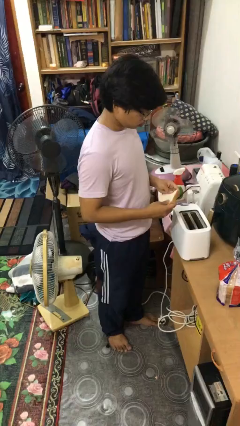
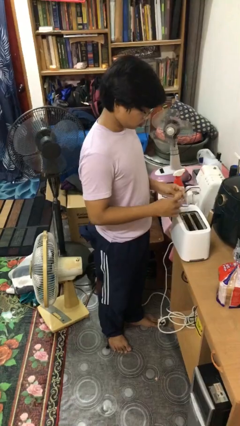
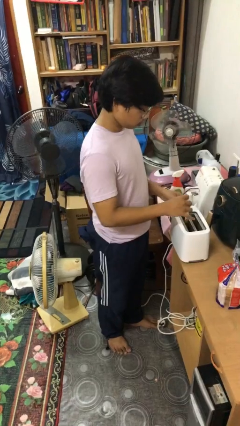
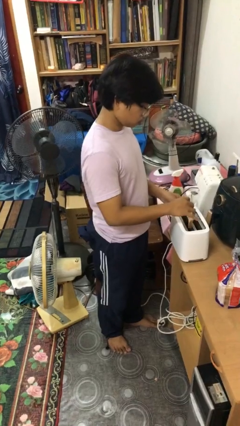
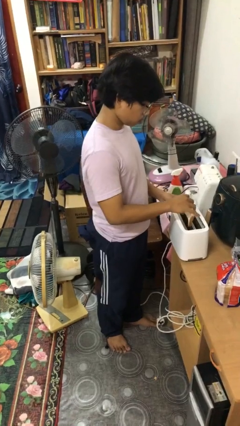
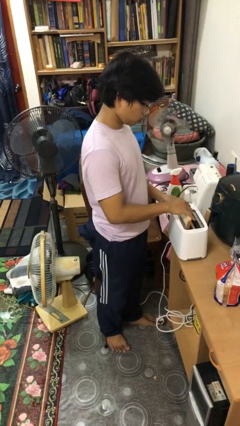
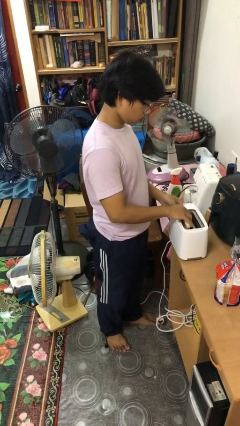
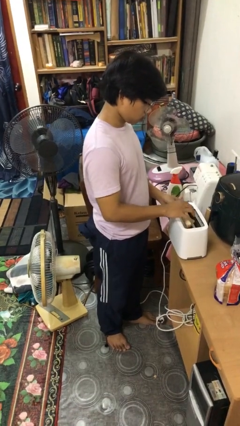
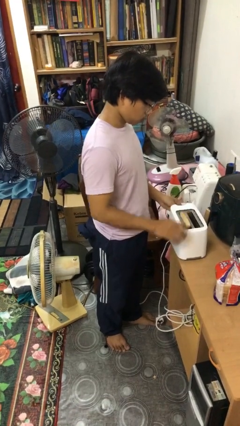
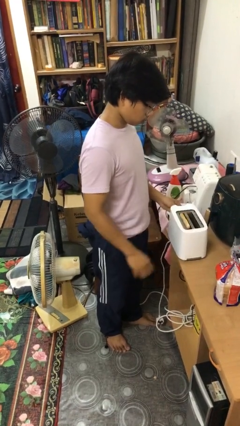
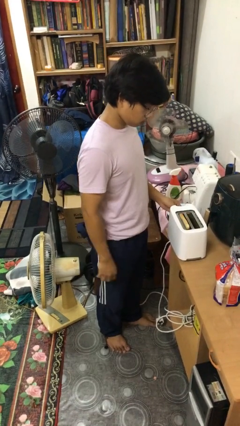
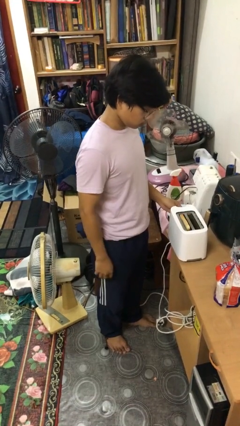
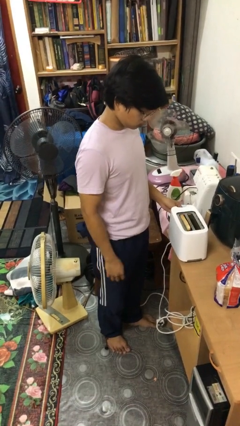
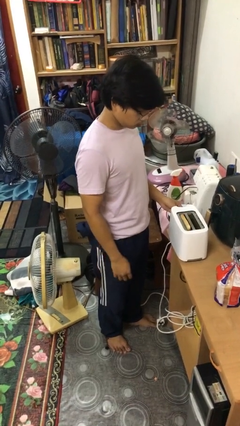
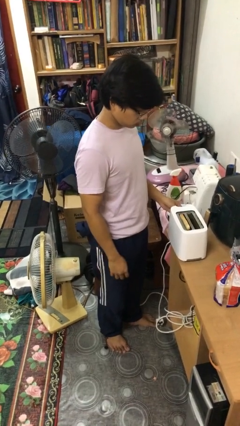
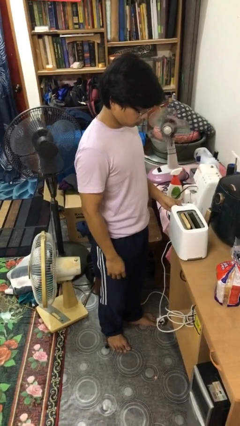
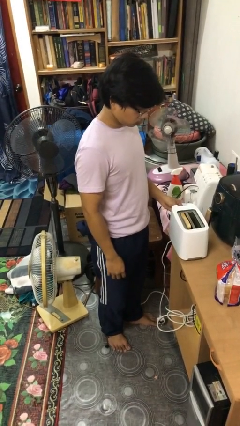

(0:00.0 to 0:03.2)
person puts object into toaster

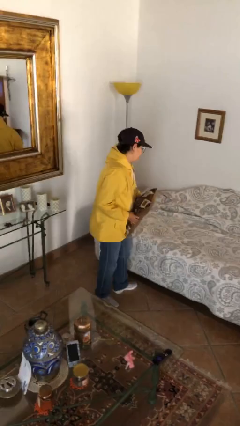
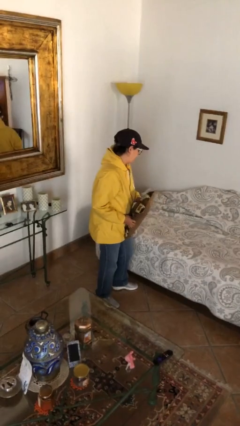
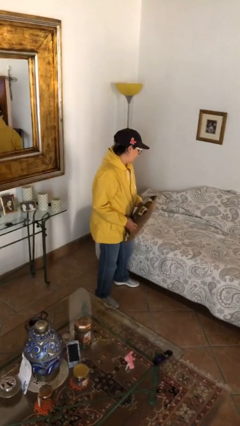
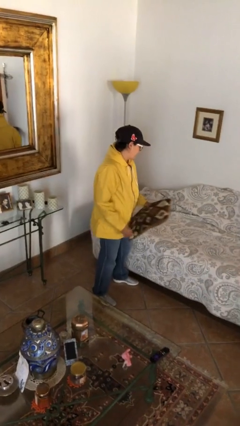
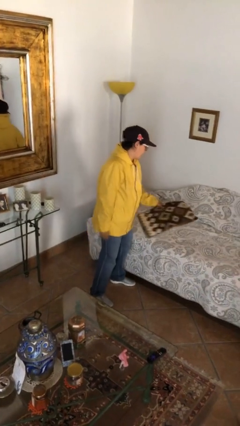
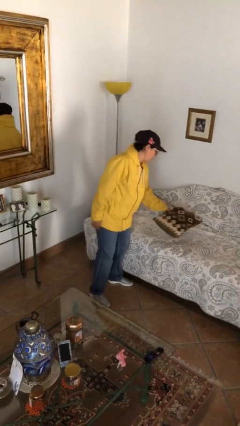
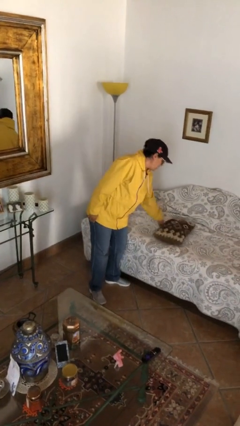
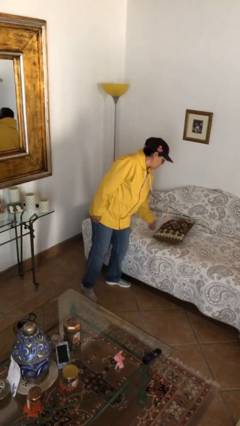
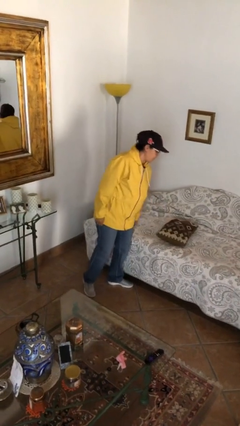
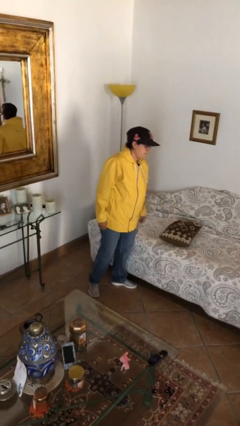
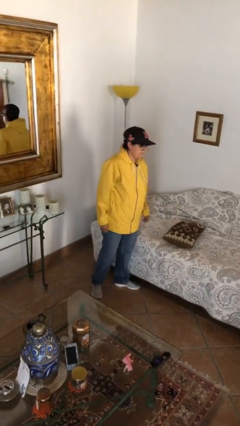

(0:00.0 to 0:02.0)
person puts down object on bed

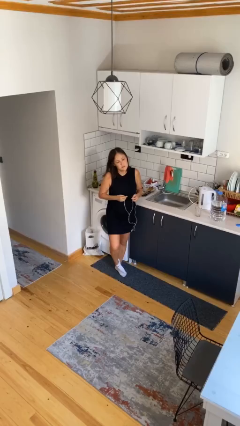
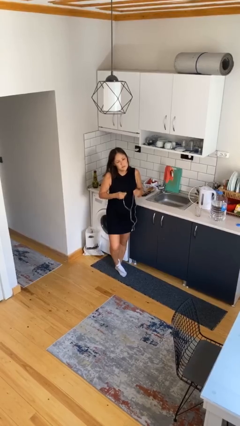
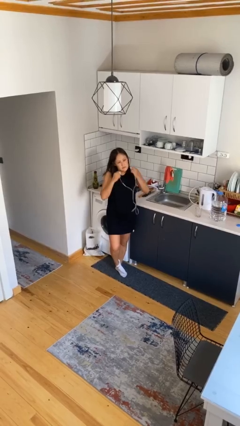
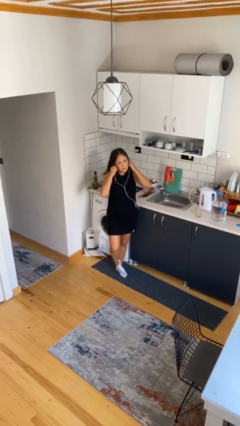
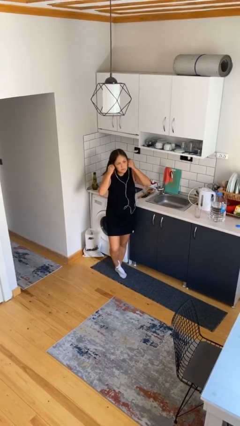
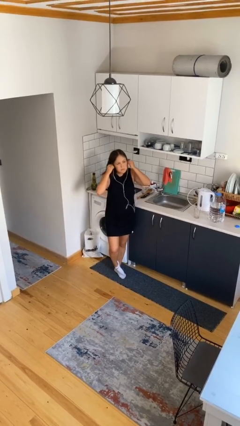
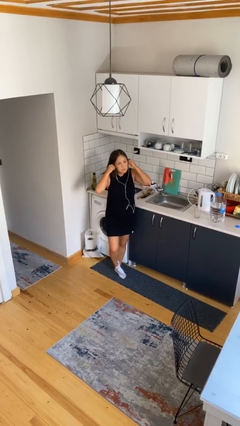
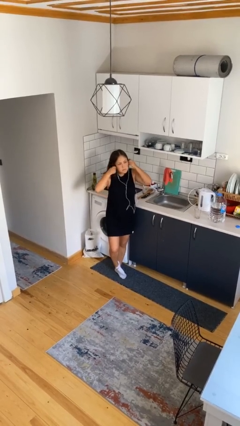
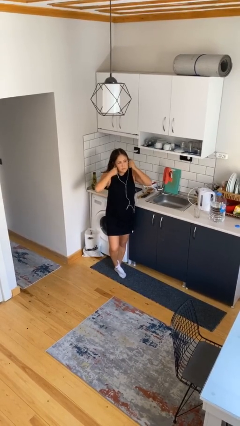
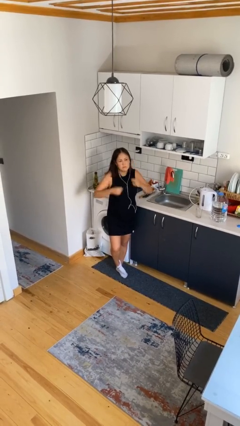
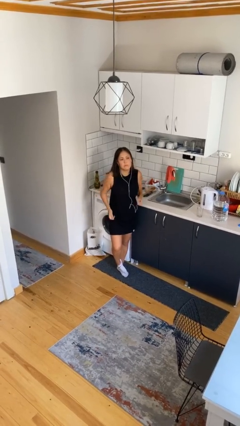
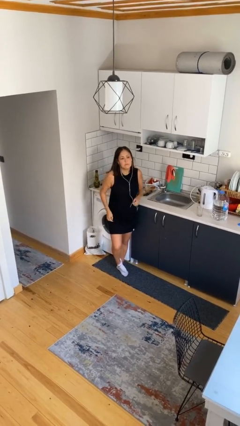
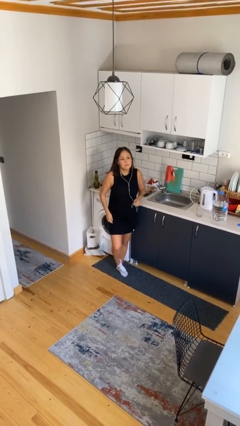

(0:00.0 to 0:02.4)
person puts on headphones

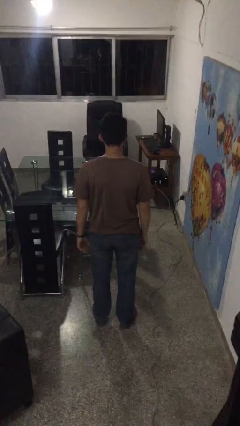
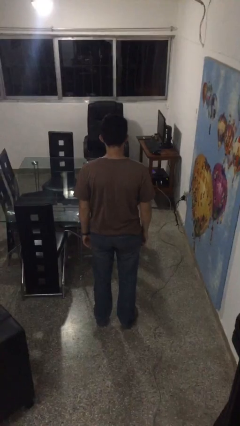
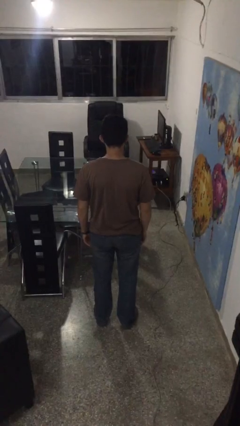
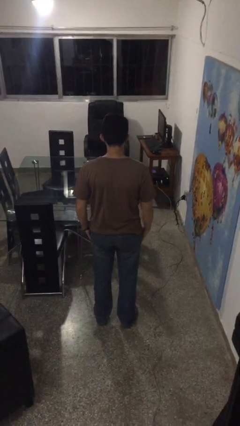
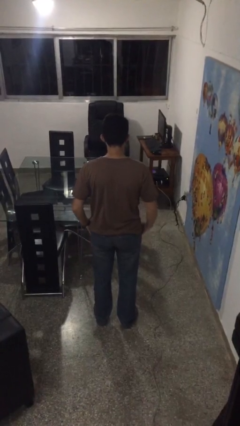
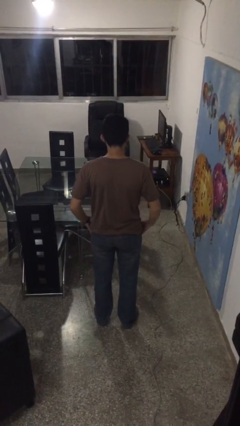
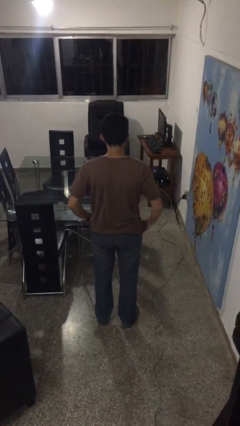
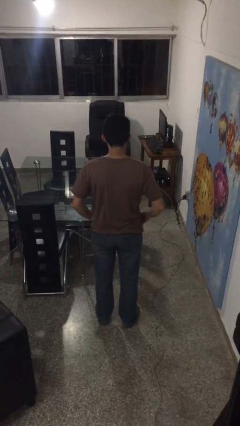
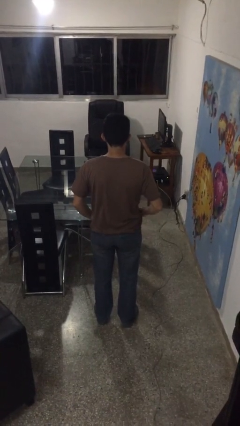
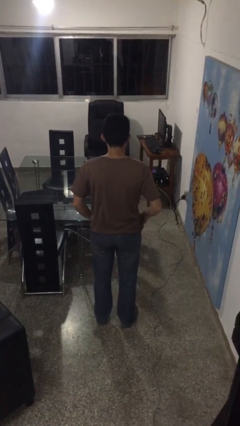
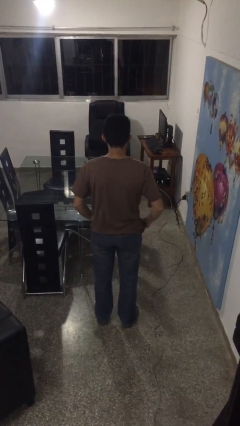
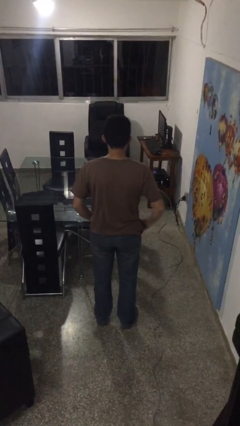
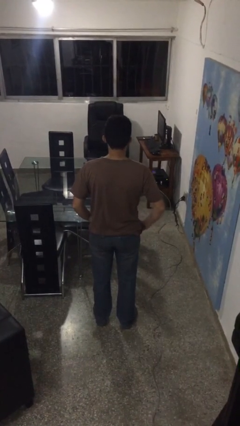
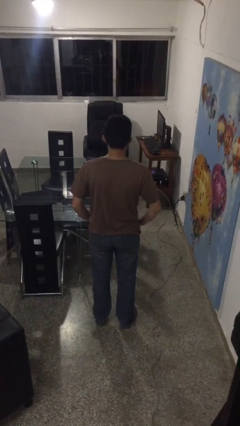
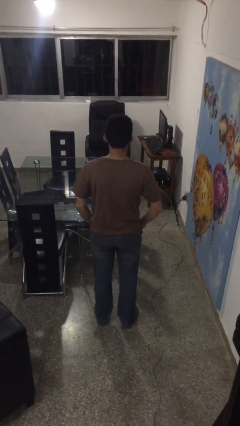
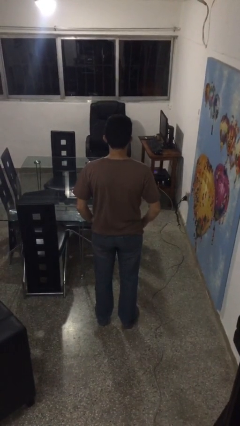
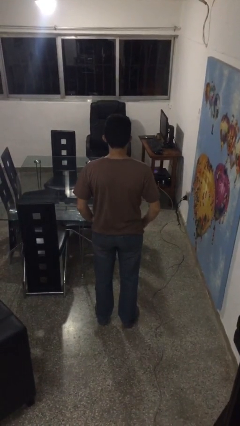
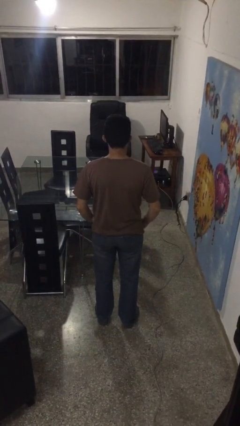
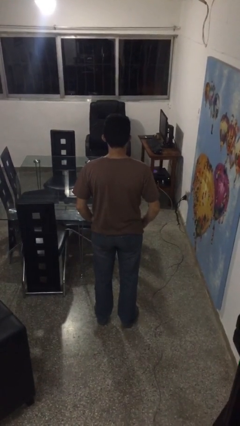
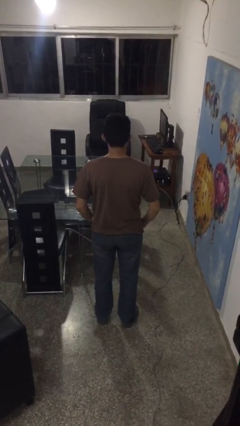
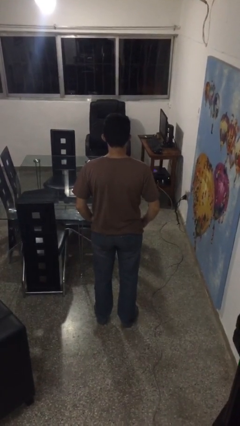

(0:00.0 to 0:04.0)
person puts hands in back pockets

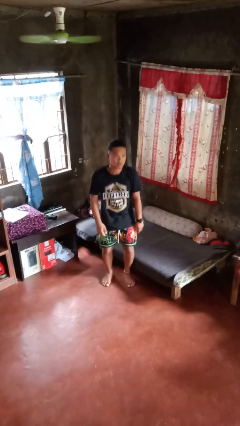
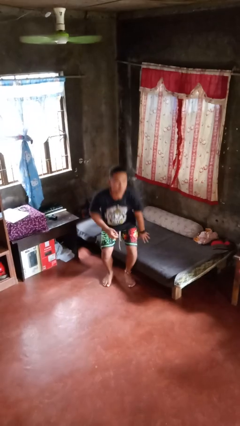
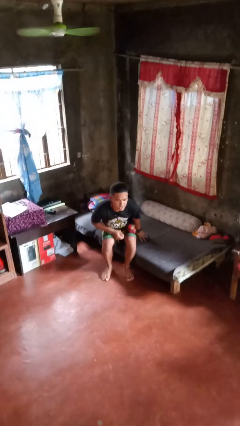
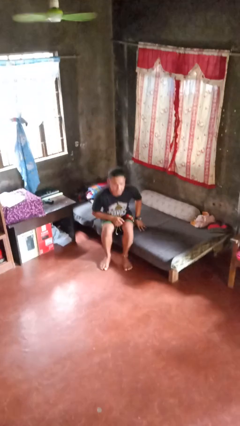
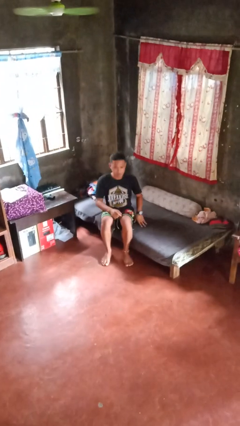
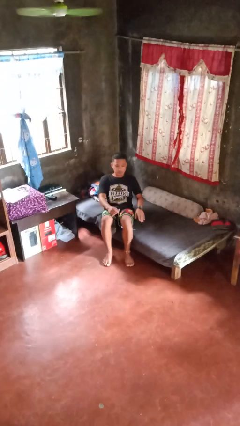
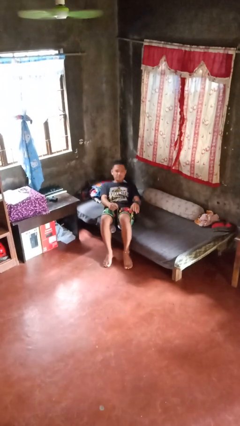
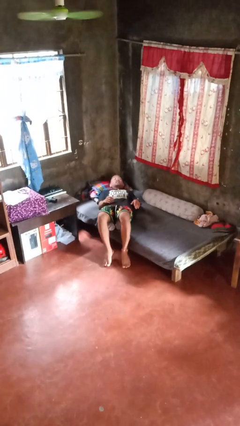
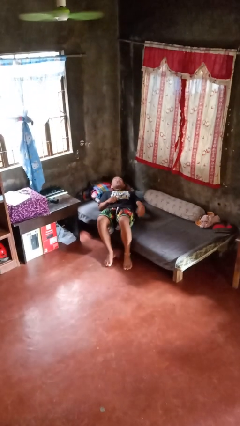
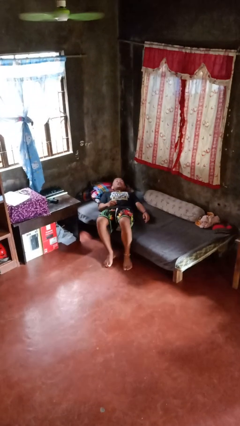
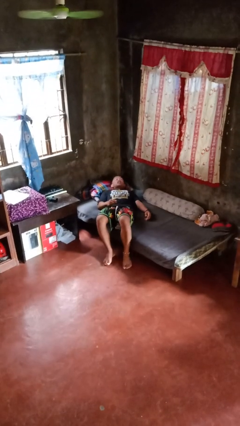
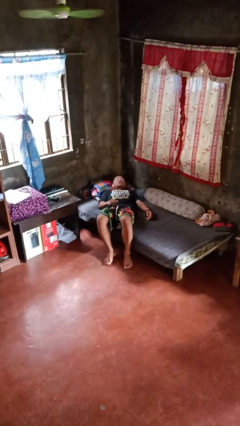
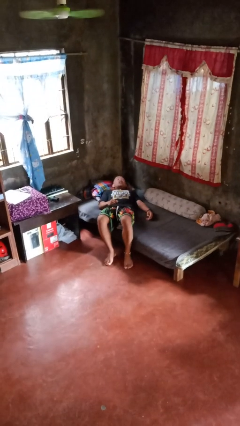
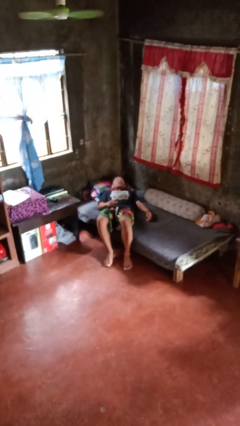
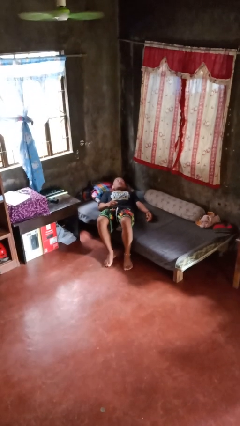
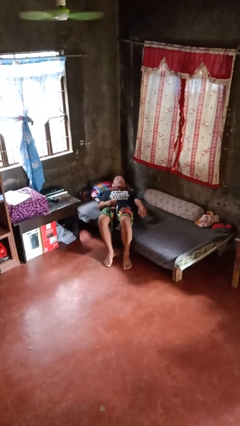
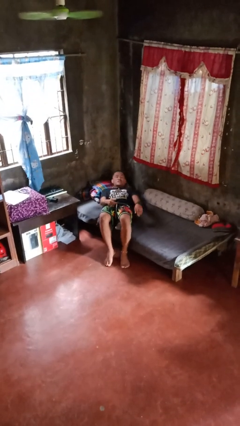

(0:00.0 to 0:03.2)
person lies down on bed

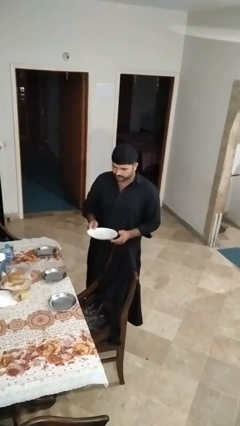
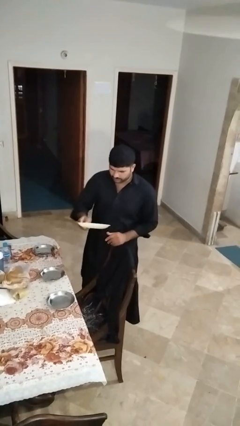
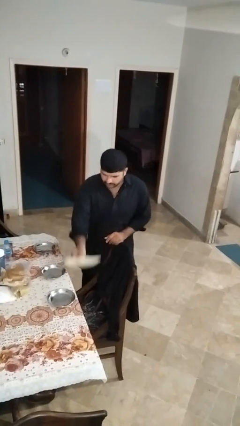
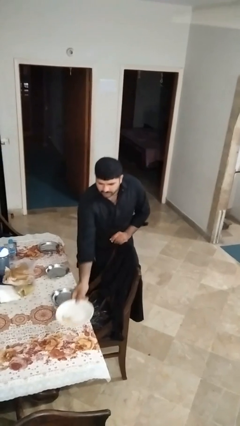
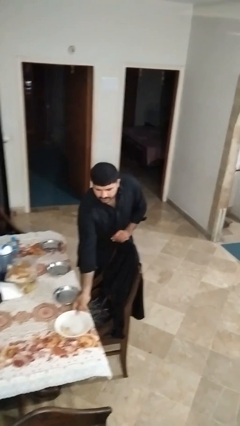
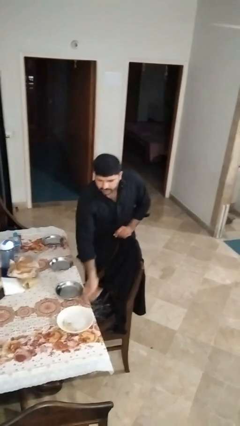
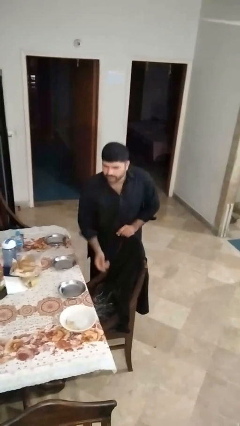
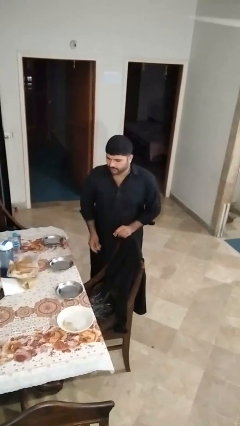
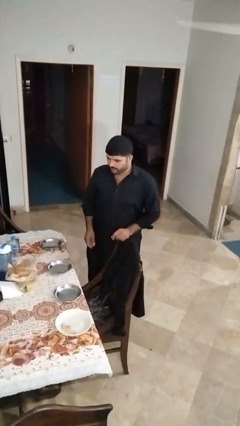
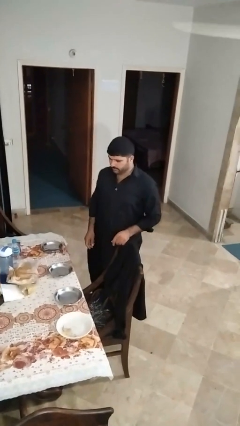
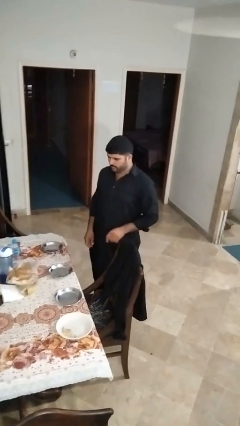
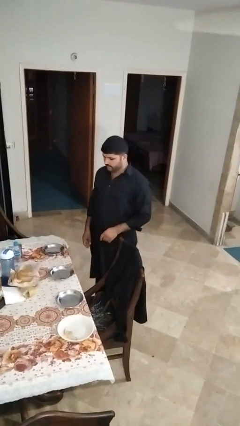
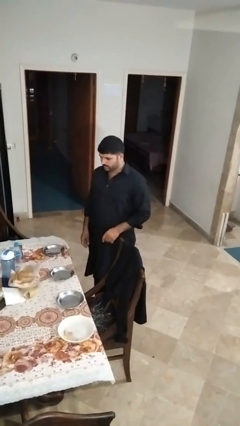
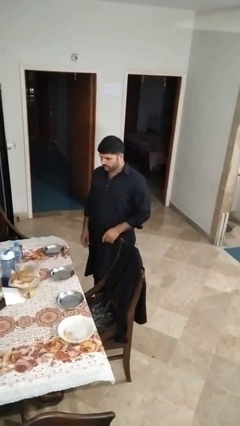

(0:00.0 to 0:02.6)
person sets table
